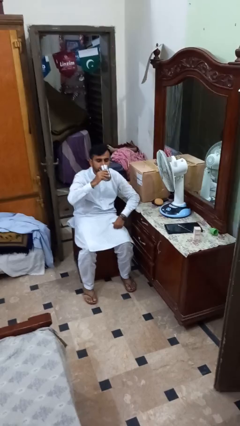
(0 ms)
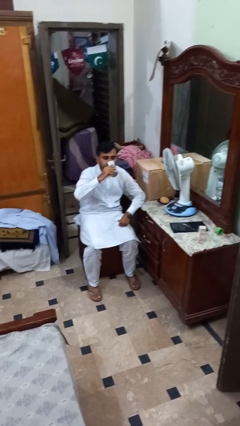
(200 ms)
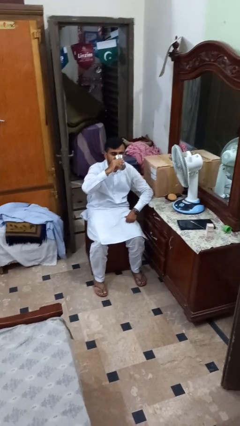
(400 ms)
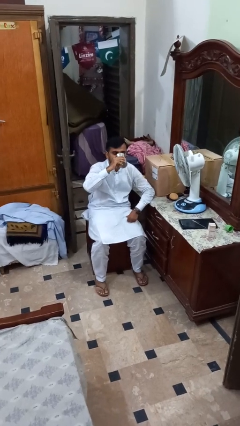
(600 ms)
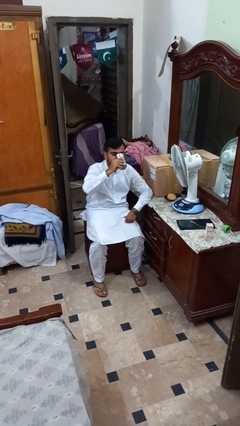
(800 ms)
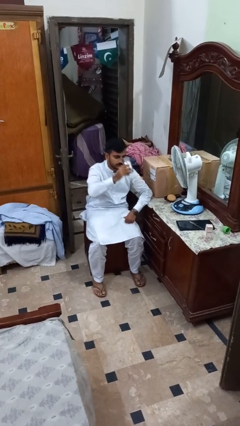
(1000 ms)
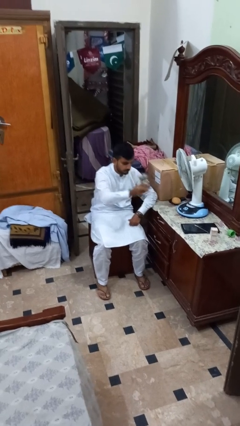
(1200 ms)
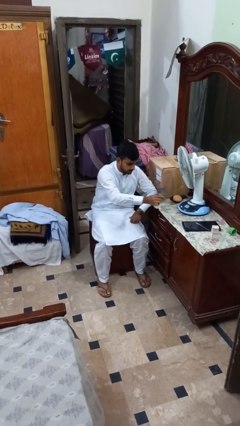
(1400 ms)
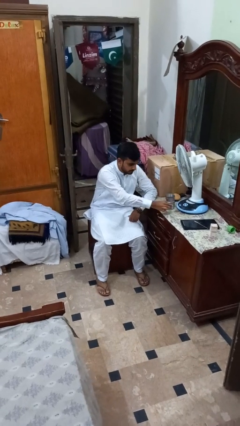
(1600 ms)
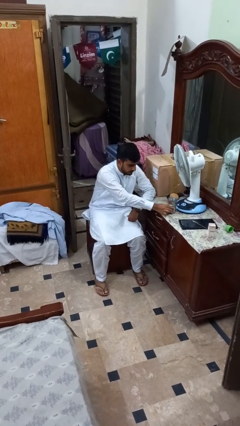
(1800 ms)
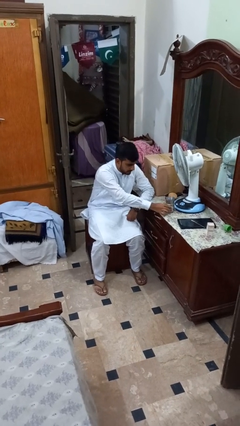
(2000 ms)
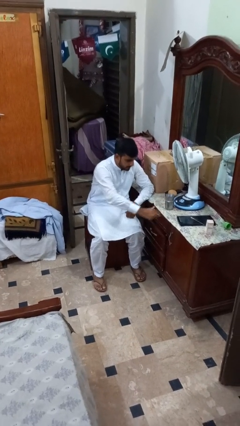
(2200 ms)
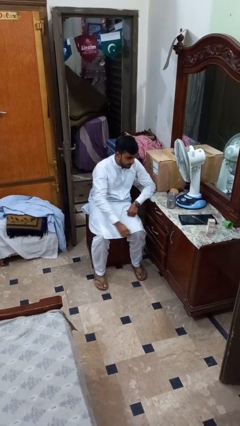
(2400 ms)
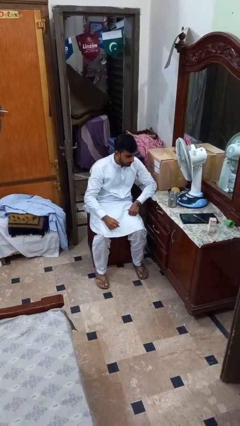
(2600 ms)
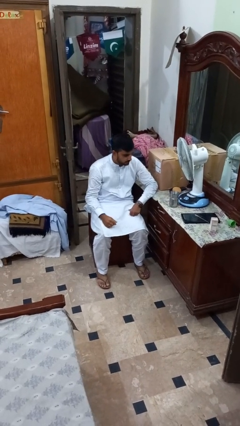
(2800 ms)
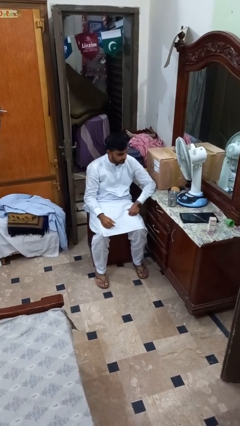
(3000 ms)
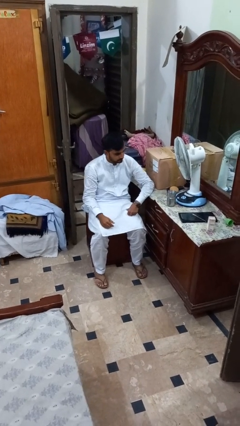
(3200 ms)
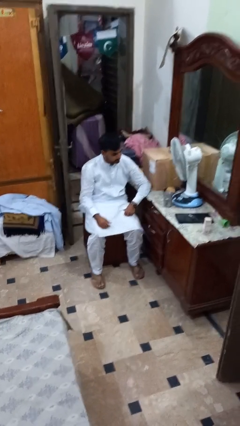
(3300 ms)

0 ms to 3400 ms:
person puts down object on table

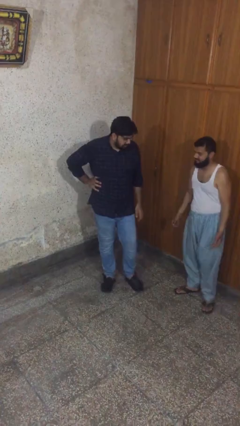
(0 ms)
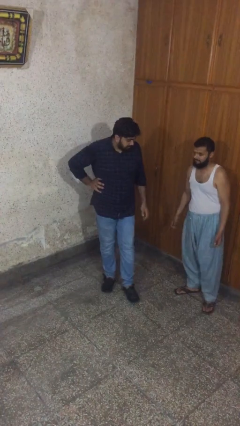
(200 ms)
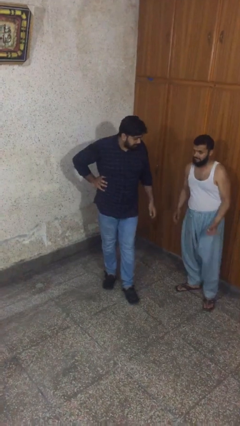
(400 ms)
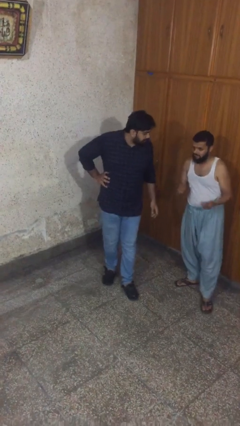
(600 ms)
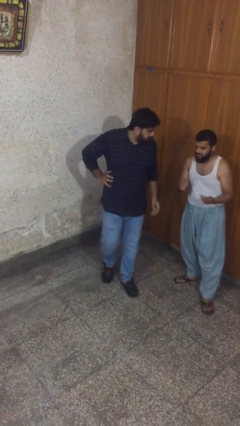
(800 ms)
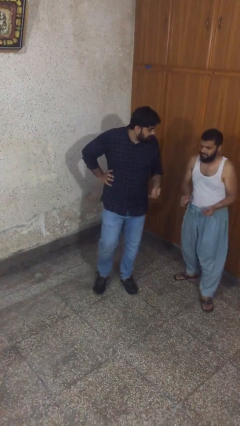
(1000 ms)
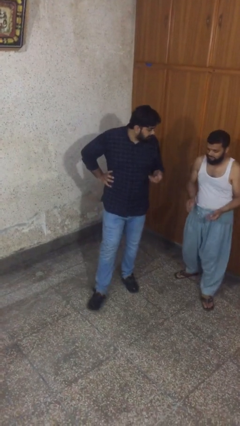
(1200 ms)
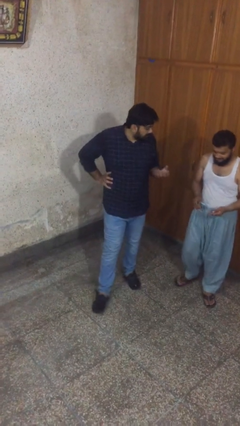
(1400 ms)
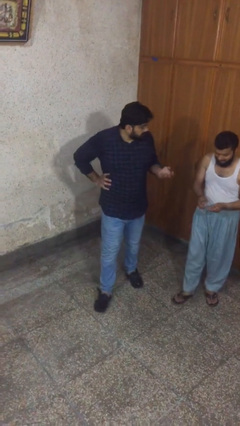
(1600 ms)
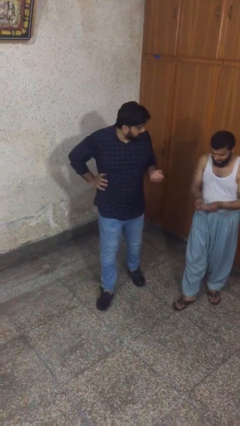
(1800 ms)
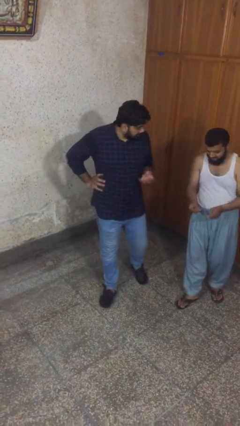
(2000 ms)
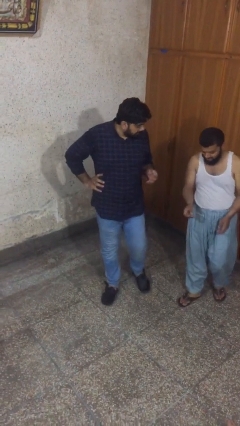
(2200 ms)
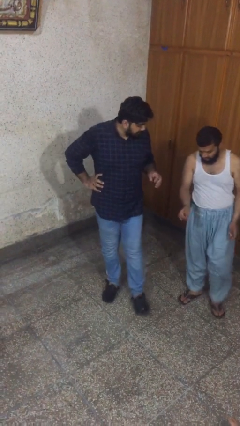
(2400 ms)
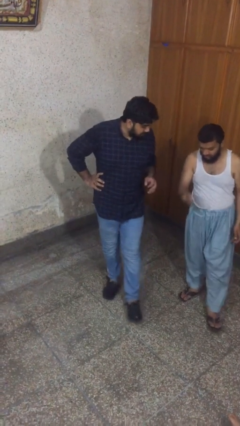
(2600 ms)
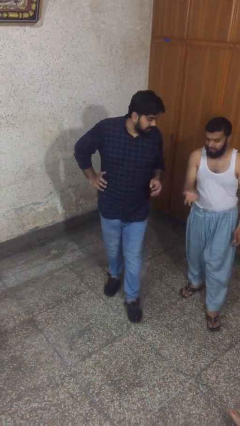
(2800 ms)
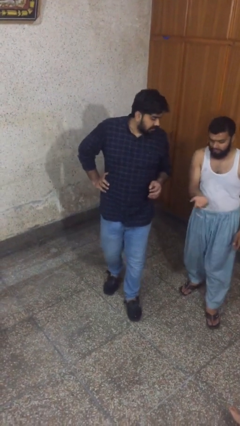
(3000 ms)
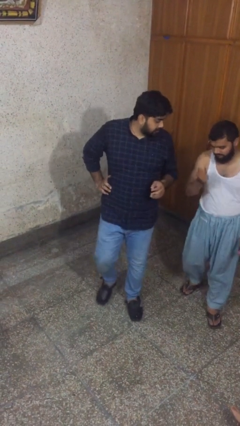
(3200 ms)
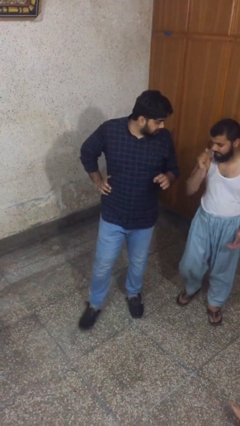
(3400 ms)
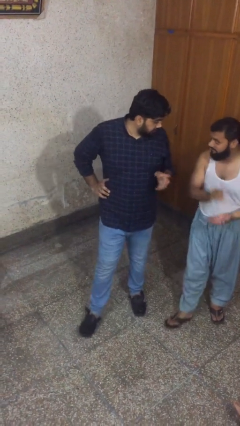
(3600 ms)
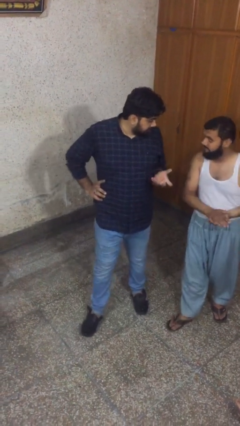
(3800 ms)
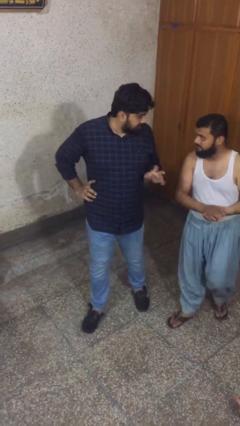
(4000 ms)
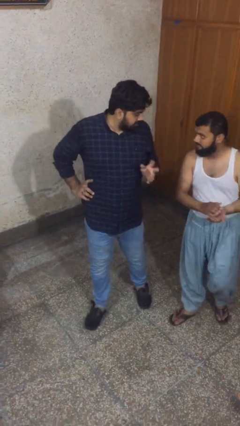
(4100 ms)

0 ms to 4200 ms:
person talks to person

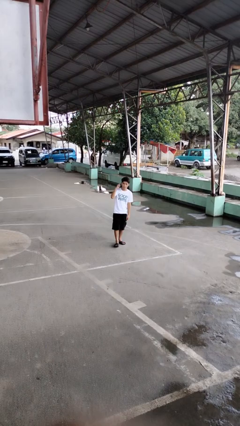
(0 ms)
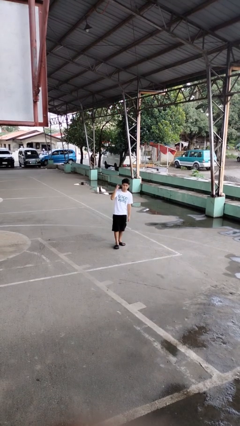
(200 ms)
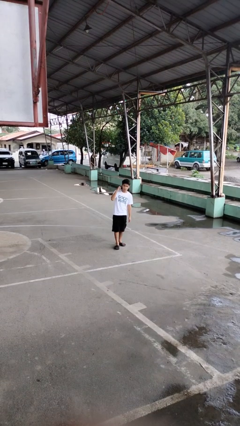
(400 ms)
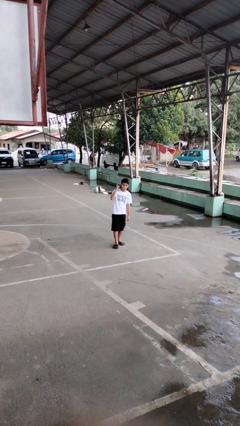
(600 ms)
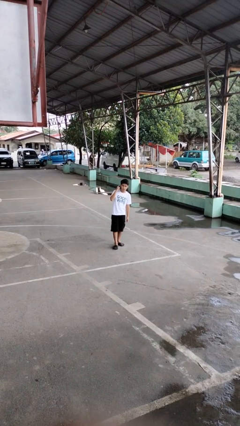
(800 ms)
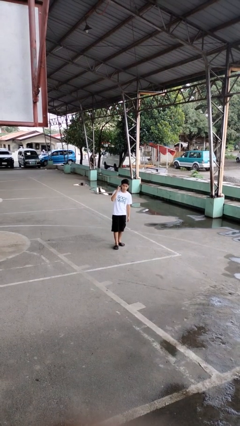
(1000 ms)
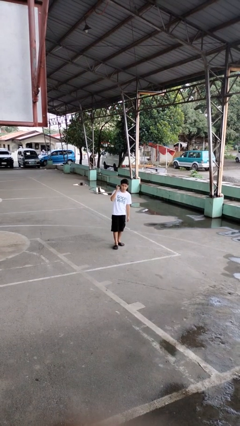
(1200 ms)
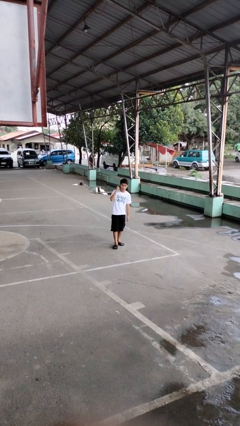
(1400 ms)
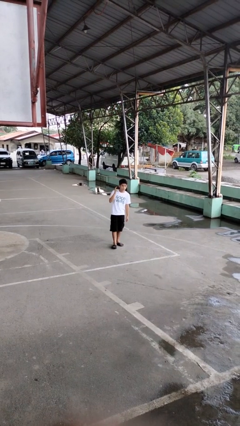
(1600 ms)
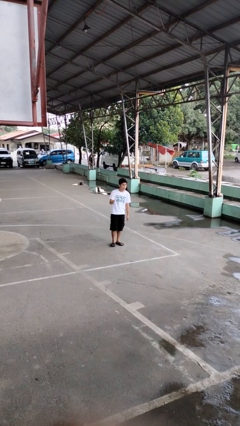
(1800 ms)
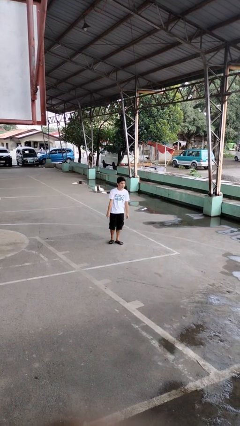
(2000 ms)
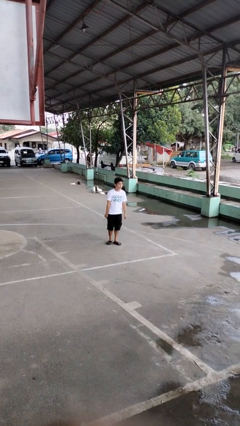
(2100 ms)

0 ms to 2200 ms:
person gestures listen closely

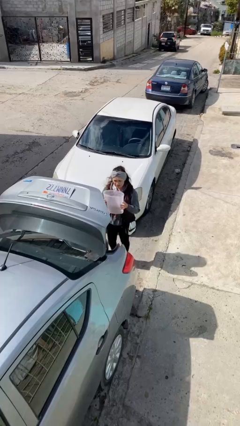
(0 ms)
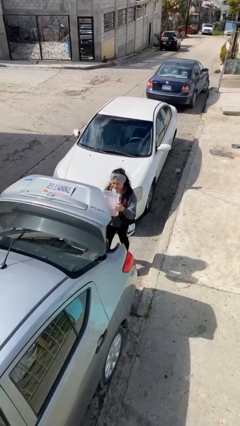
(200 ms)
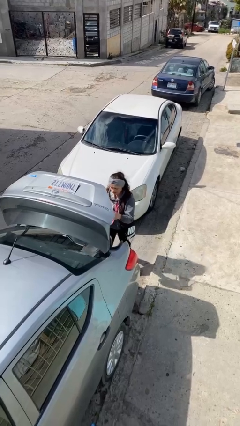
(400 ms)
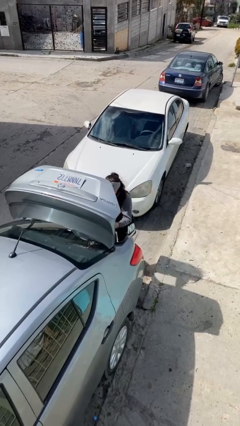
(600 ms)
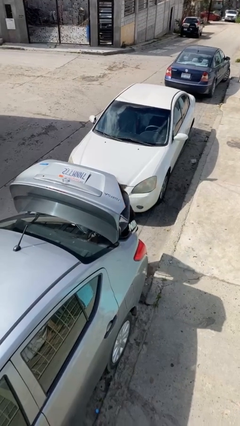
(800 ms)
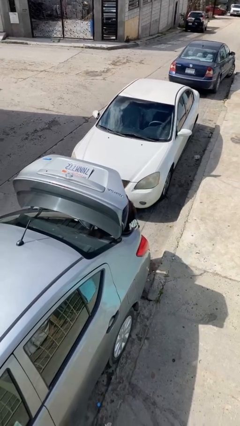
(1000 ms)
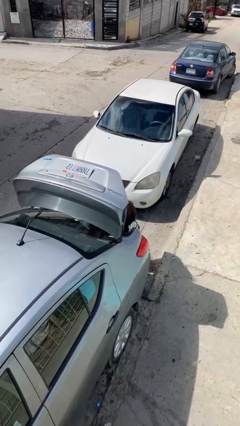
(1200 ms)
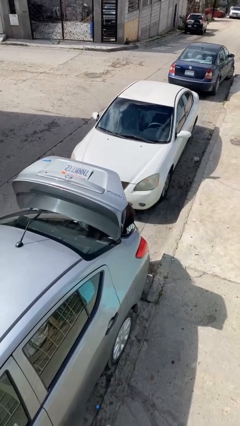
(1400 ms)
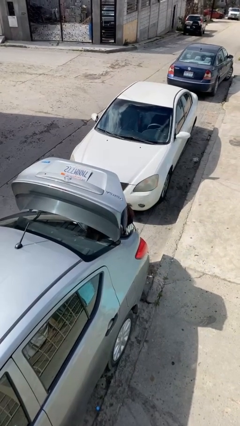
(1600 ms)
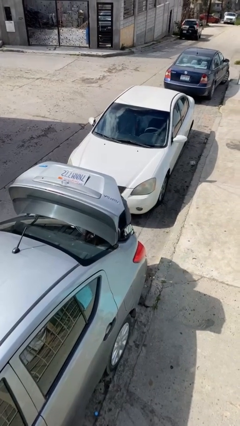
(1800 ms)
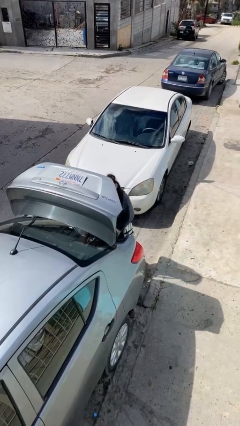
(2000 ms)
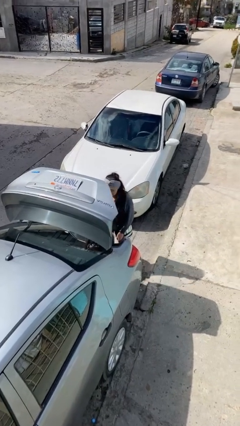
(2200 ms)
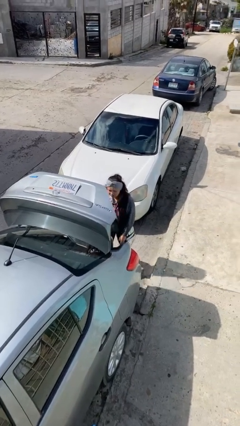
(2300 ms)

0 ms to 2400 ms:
person loads car

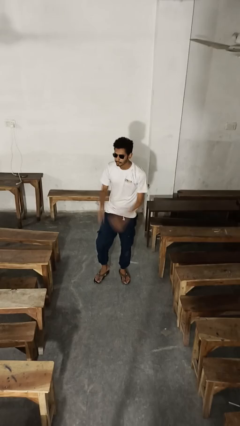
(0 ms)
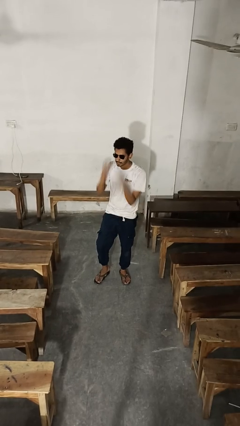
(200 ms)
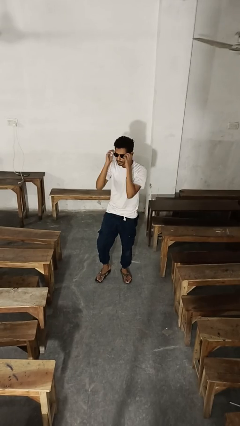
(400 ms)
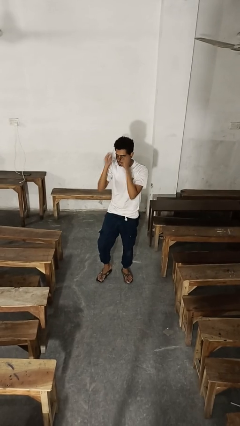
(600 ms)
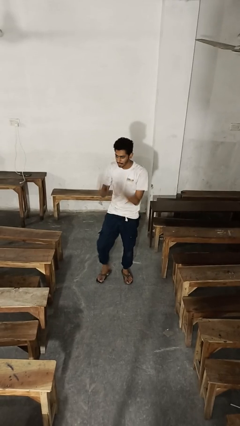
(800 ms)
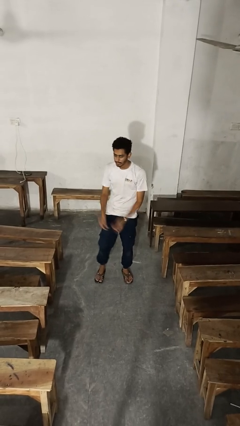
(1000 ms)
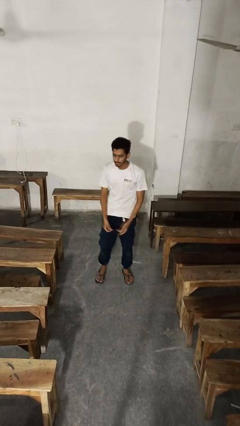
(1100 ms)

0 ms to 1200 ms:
person takes off sunglasses

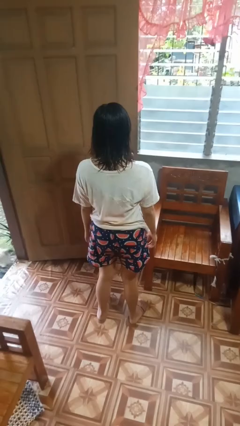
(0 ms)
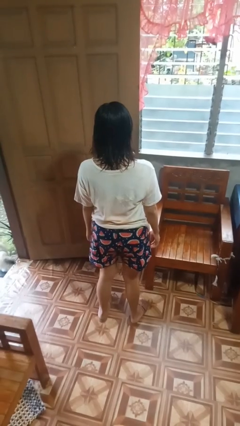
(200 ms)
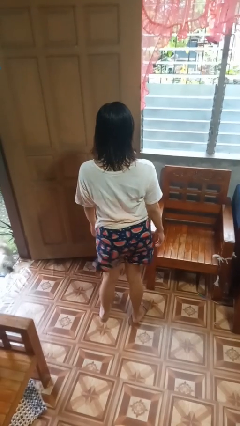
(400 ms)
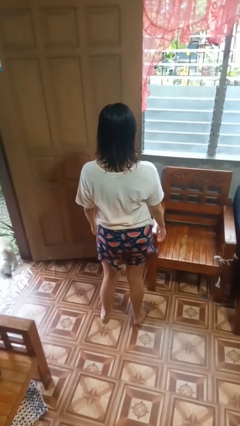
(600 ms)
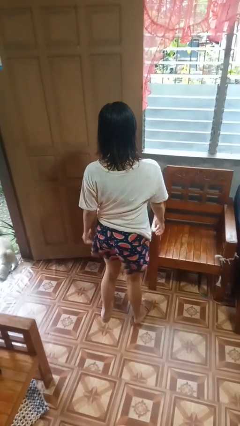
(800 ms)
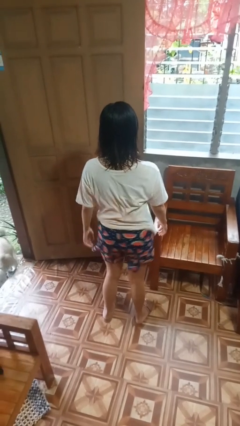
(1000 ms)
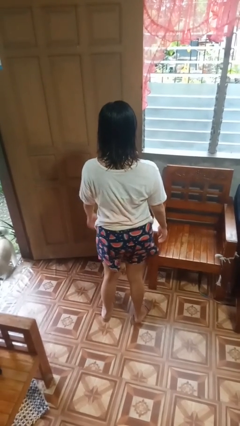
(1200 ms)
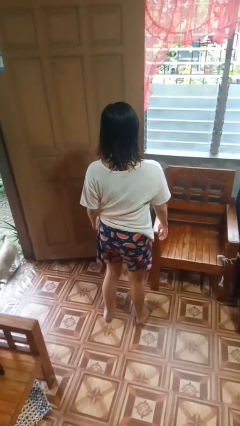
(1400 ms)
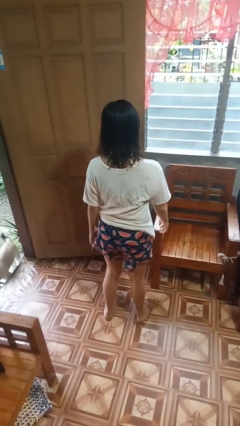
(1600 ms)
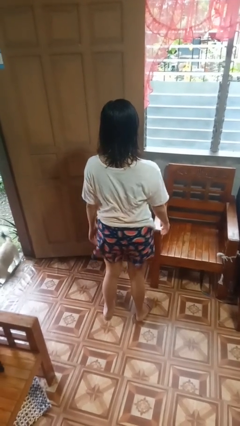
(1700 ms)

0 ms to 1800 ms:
person wiggles hips

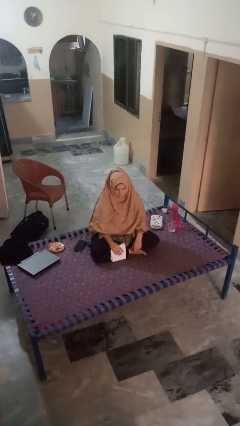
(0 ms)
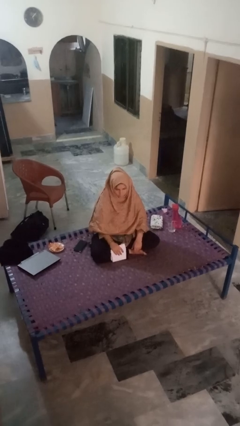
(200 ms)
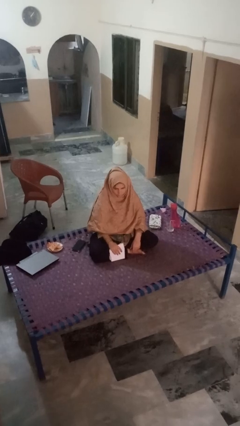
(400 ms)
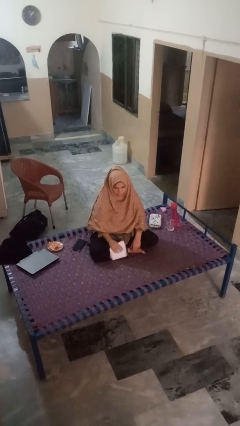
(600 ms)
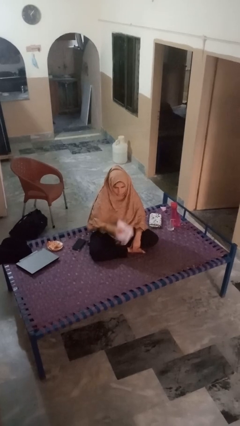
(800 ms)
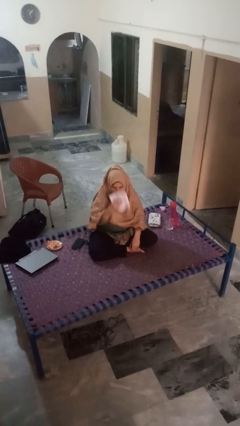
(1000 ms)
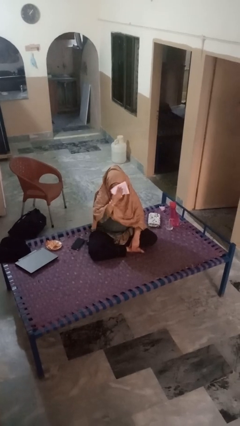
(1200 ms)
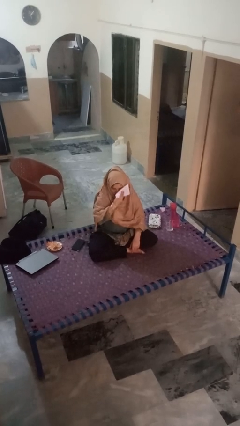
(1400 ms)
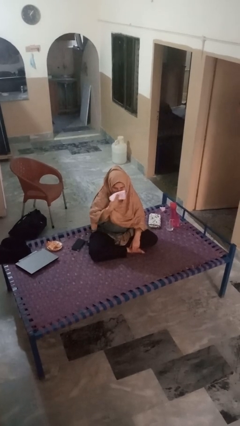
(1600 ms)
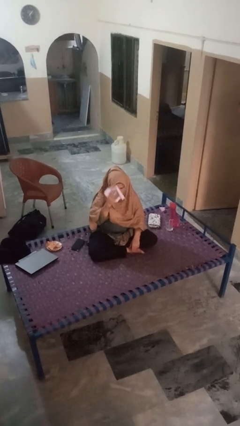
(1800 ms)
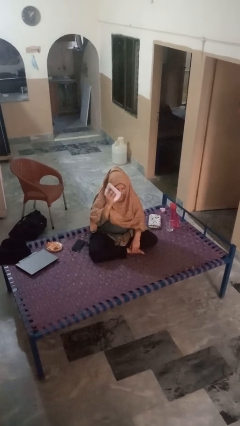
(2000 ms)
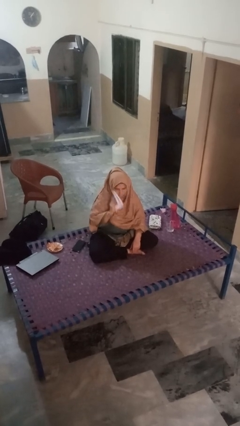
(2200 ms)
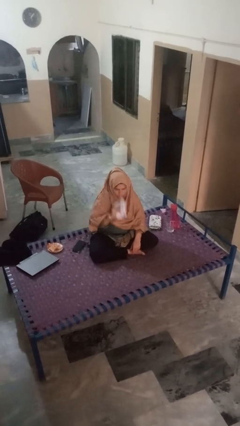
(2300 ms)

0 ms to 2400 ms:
person wipes mouth with napkin
